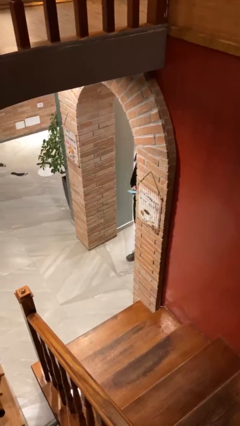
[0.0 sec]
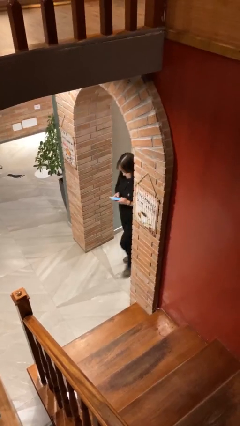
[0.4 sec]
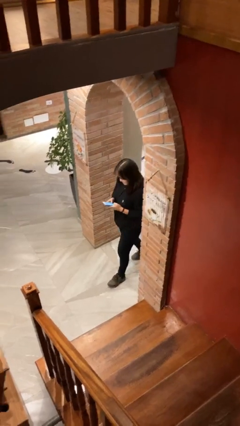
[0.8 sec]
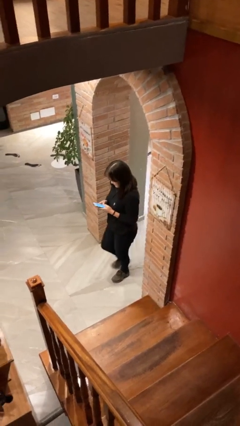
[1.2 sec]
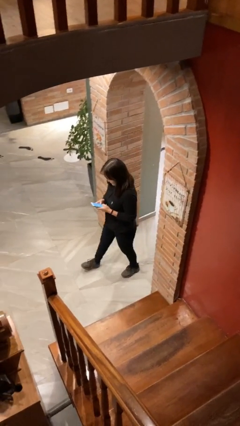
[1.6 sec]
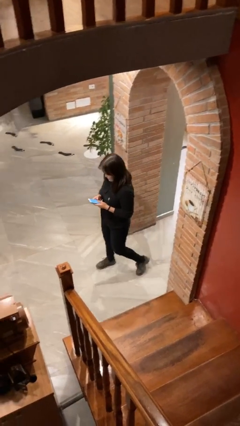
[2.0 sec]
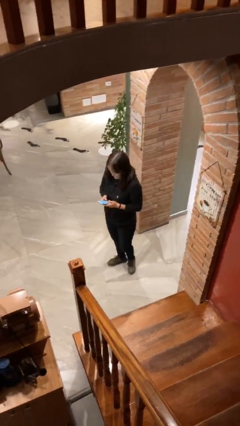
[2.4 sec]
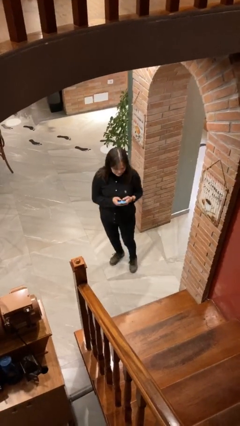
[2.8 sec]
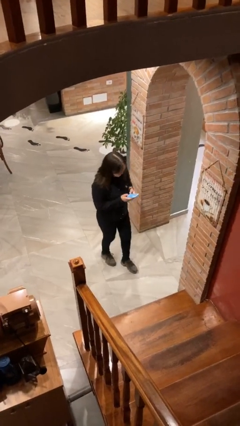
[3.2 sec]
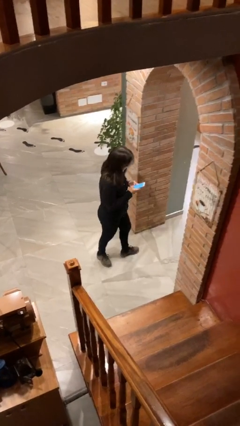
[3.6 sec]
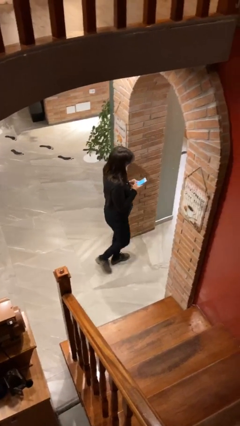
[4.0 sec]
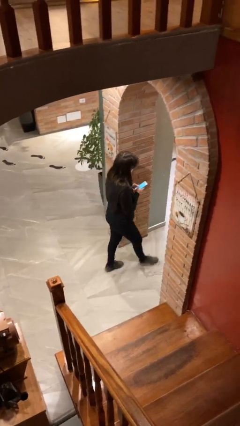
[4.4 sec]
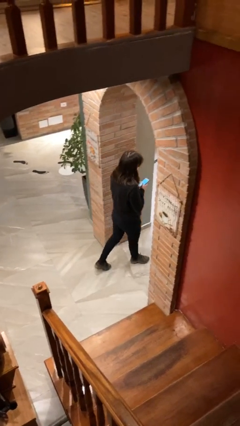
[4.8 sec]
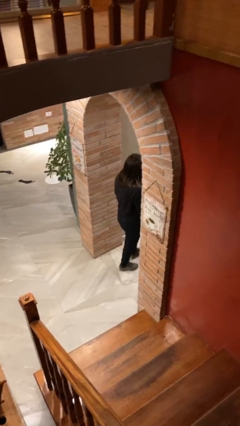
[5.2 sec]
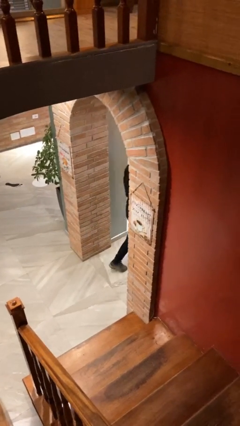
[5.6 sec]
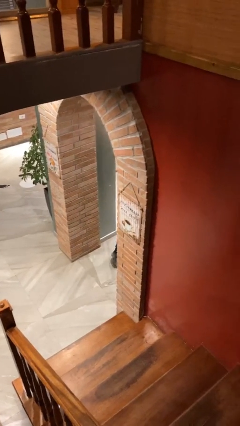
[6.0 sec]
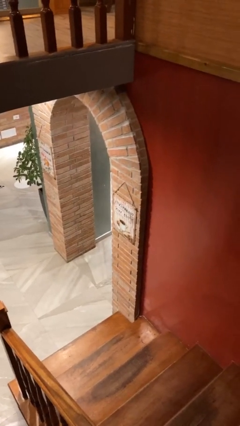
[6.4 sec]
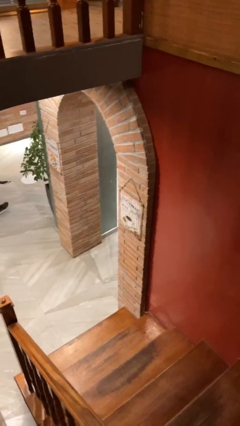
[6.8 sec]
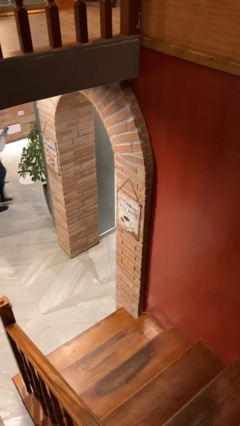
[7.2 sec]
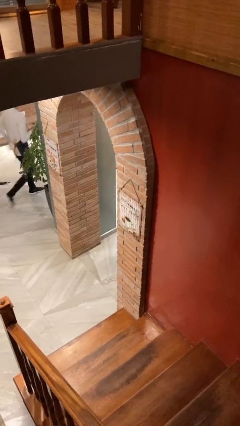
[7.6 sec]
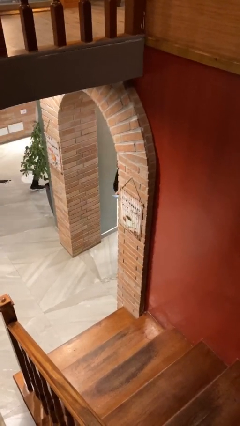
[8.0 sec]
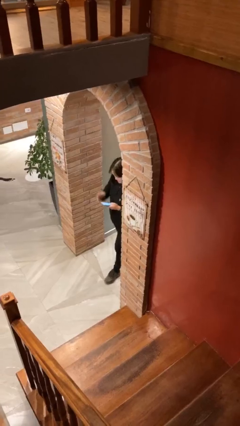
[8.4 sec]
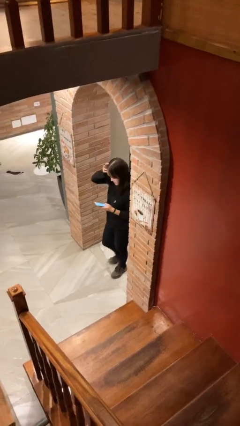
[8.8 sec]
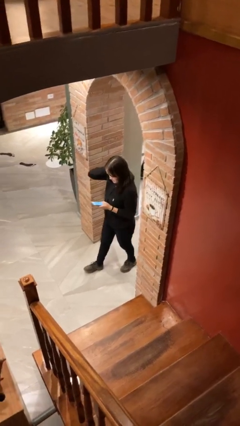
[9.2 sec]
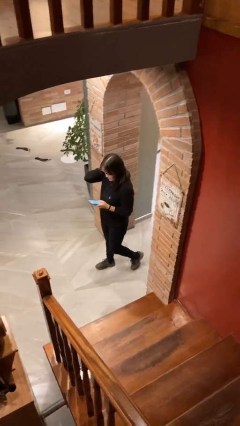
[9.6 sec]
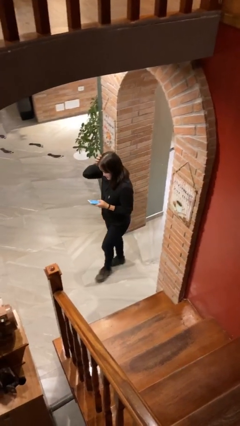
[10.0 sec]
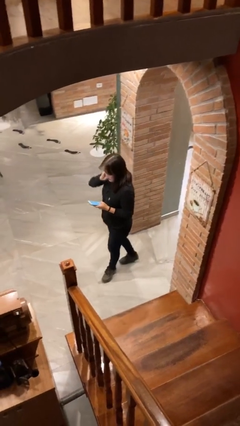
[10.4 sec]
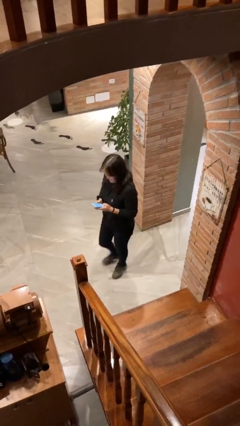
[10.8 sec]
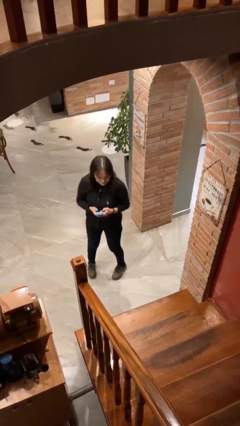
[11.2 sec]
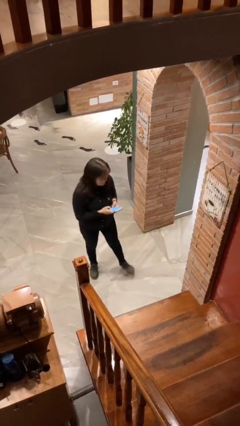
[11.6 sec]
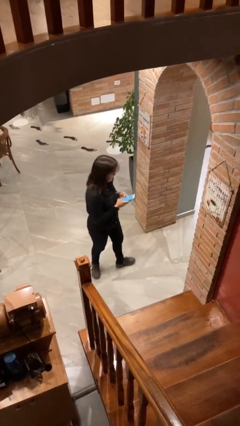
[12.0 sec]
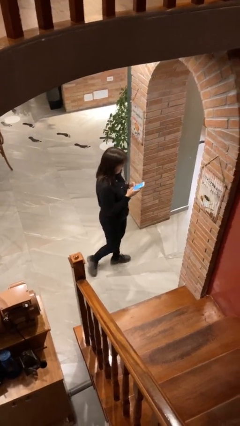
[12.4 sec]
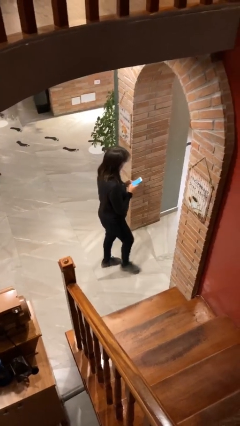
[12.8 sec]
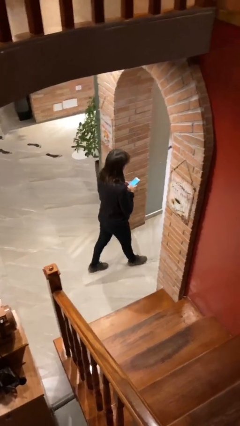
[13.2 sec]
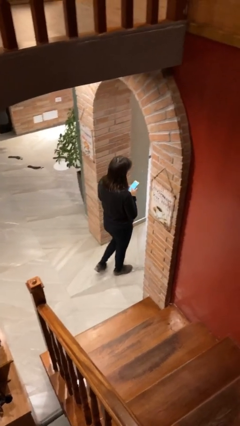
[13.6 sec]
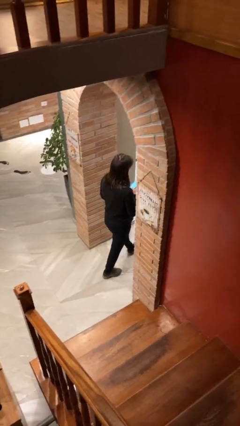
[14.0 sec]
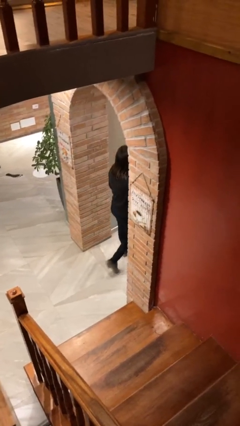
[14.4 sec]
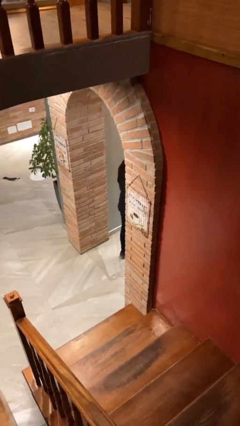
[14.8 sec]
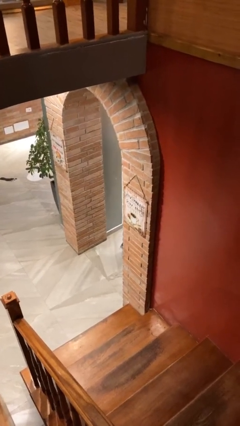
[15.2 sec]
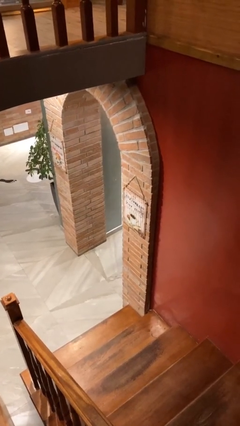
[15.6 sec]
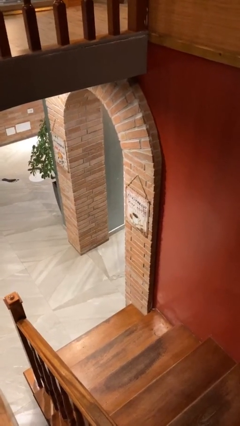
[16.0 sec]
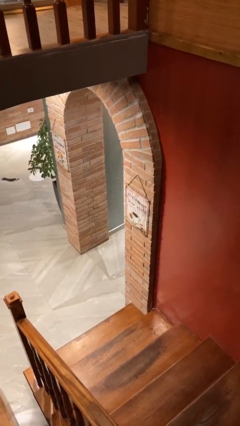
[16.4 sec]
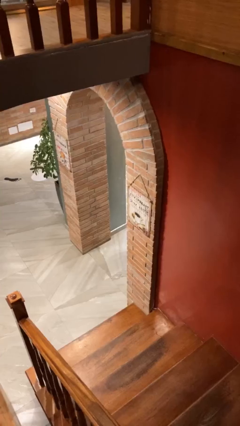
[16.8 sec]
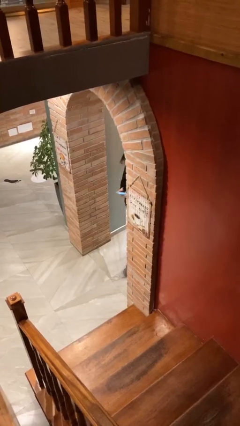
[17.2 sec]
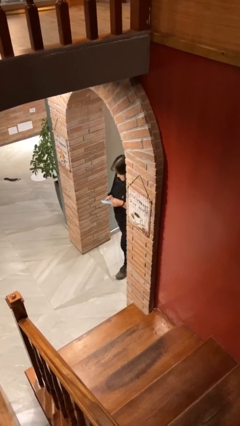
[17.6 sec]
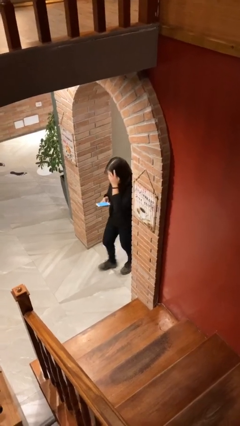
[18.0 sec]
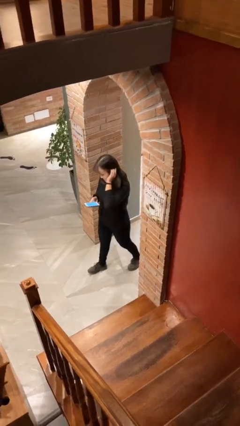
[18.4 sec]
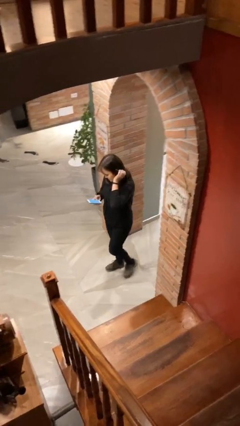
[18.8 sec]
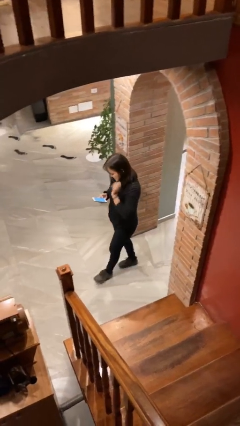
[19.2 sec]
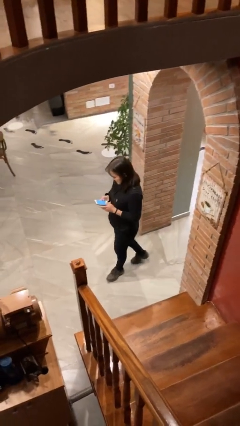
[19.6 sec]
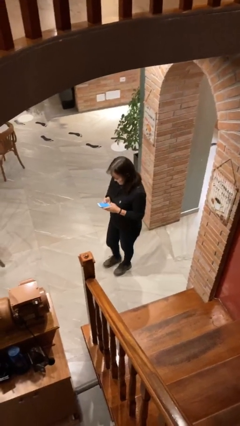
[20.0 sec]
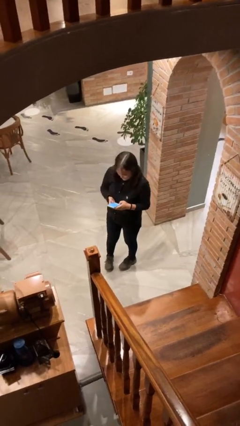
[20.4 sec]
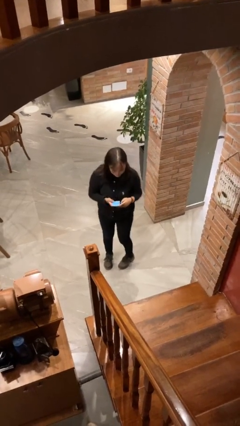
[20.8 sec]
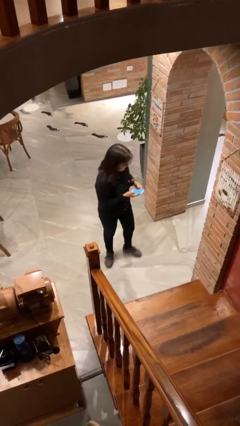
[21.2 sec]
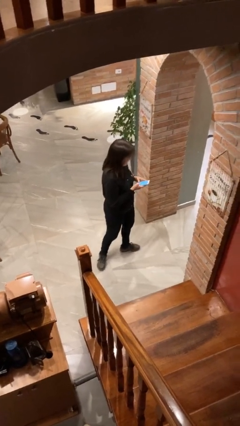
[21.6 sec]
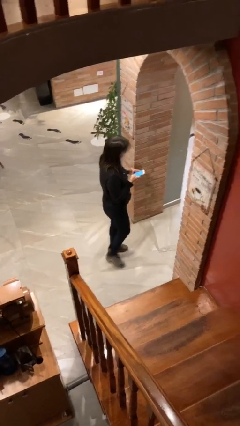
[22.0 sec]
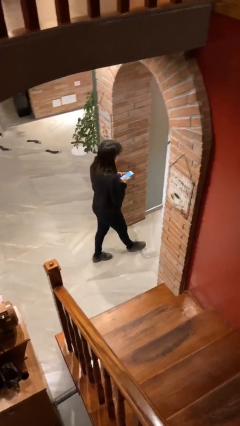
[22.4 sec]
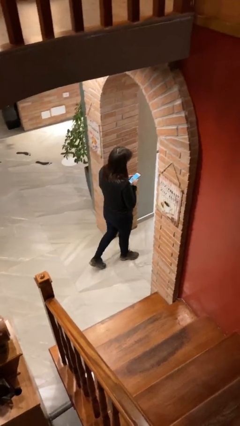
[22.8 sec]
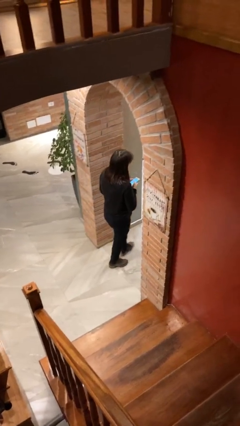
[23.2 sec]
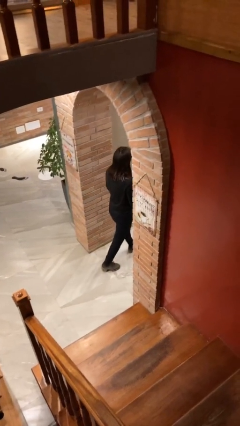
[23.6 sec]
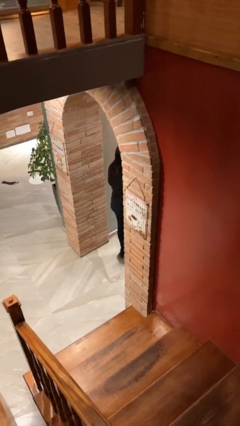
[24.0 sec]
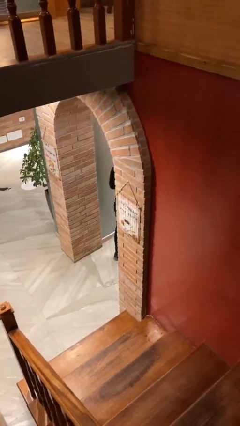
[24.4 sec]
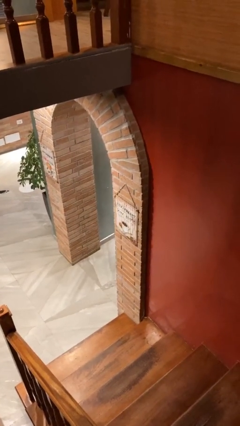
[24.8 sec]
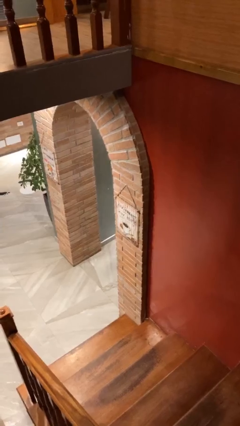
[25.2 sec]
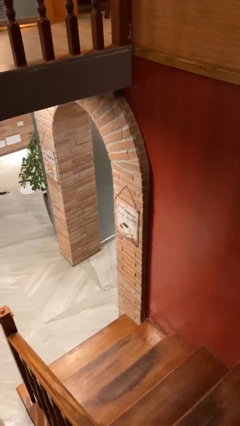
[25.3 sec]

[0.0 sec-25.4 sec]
person texts on phone

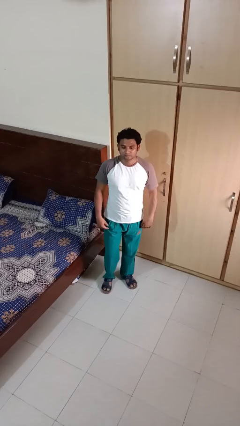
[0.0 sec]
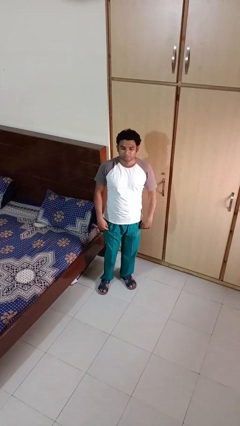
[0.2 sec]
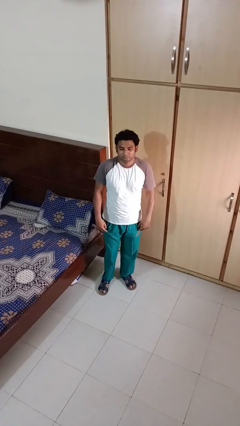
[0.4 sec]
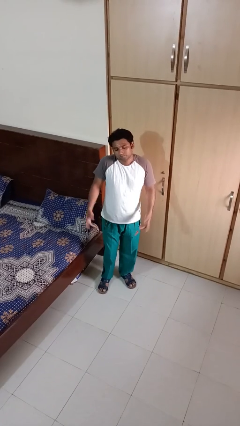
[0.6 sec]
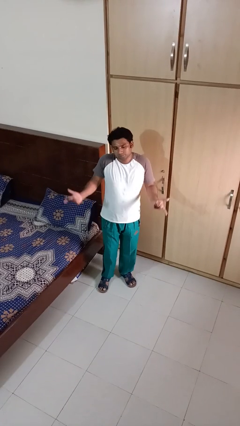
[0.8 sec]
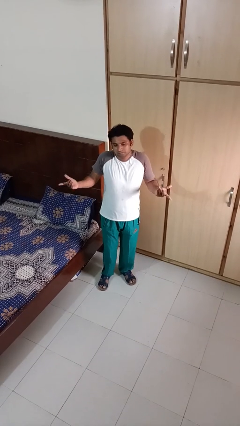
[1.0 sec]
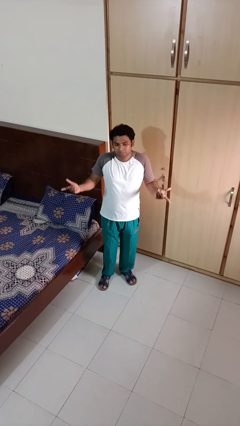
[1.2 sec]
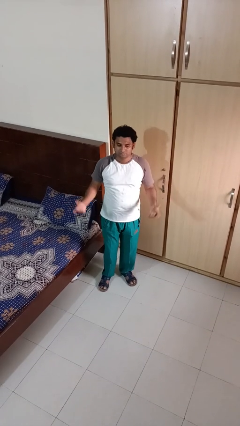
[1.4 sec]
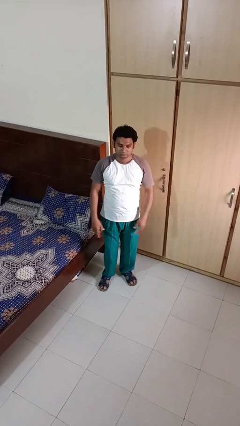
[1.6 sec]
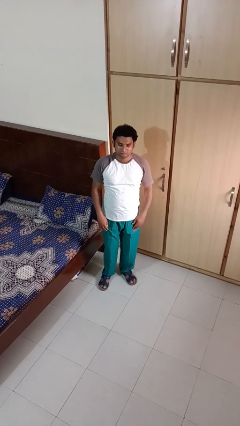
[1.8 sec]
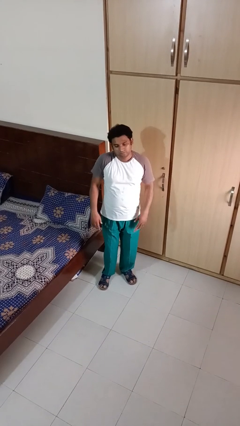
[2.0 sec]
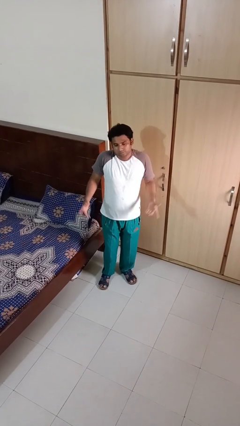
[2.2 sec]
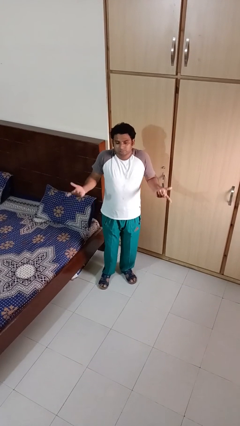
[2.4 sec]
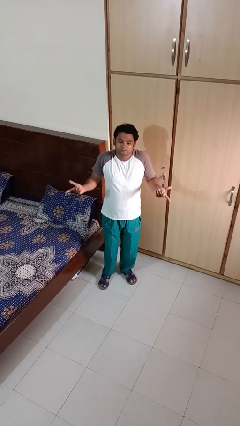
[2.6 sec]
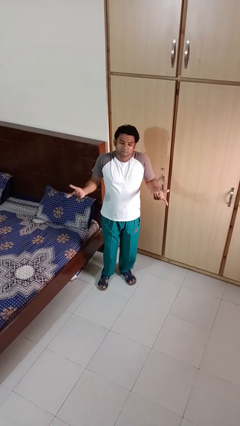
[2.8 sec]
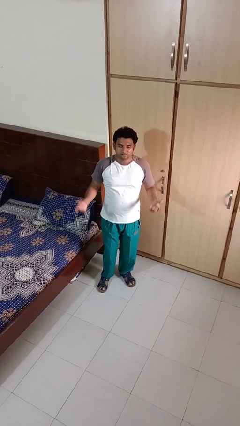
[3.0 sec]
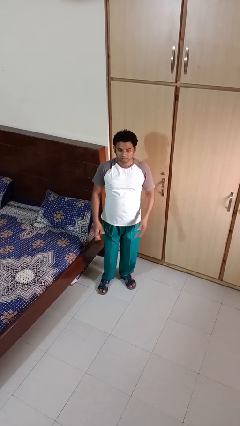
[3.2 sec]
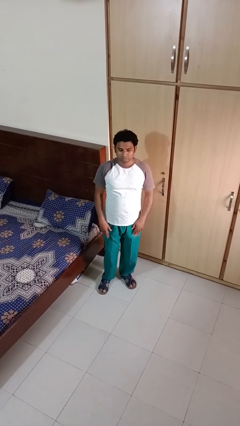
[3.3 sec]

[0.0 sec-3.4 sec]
person shrugs

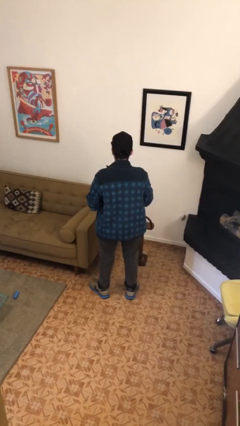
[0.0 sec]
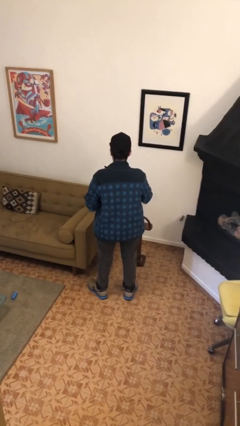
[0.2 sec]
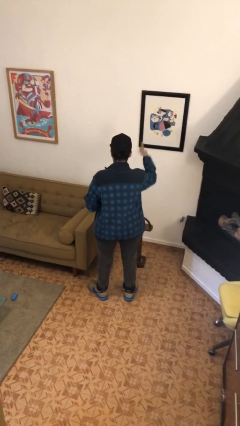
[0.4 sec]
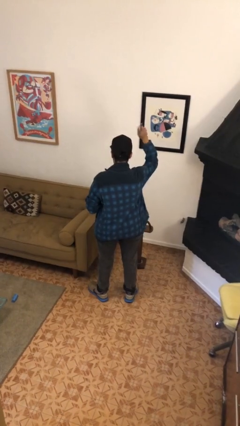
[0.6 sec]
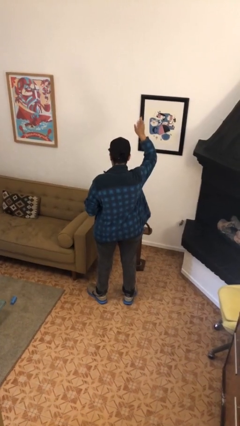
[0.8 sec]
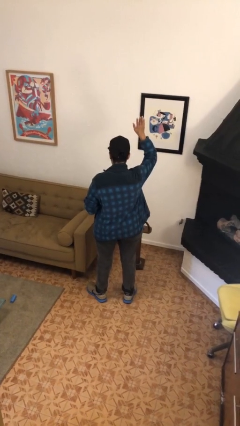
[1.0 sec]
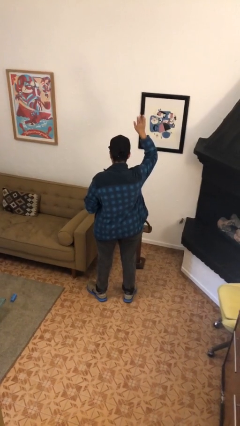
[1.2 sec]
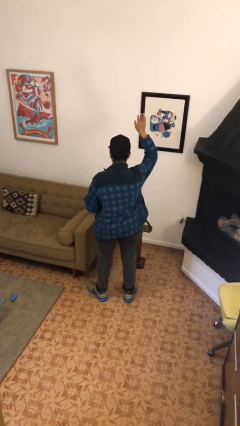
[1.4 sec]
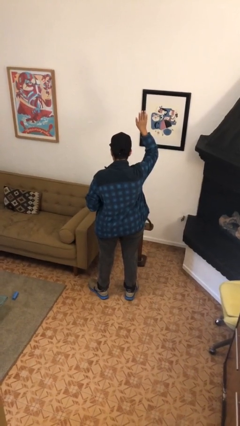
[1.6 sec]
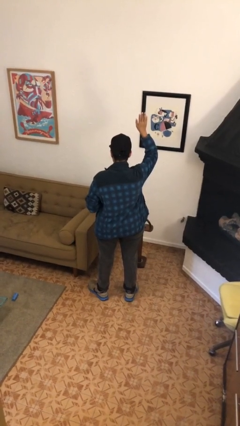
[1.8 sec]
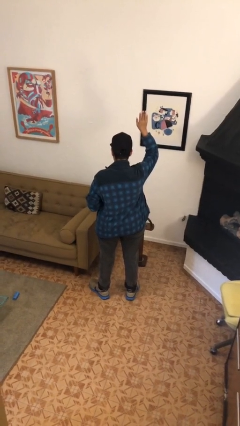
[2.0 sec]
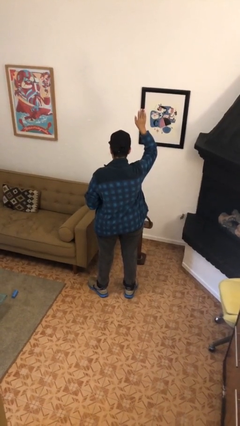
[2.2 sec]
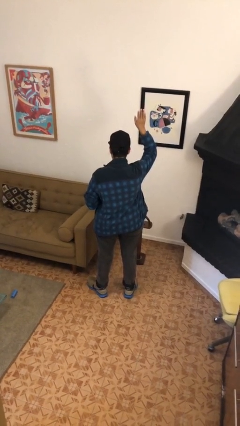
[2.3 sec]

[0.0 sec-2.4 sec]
person gestures raise hand
